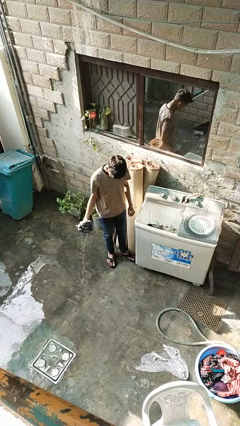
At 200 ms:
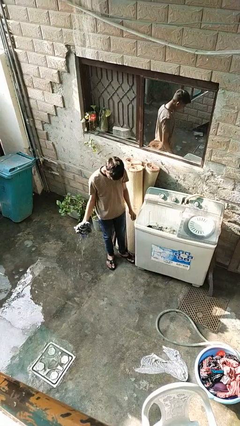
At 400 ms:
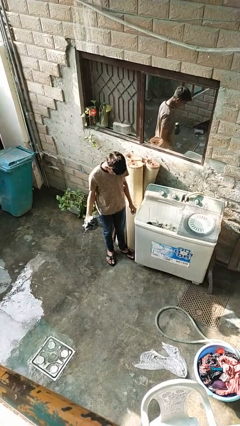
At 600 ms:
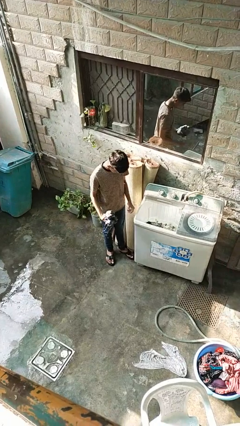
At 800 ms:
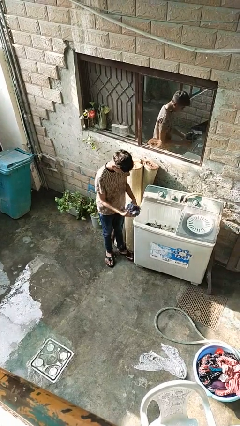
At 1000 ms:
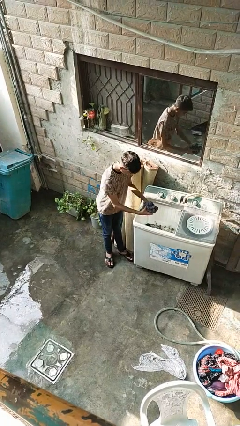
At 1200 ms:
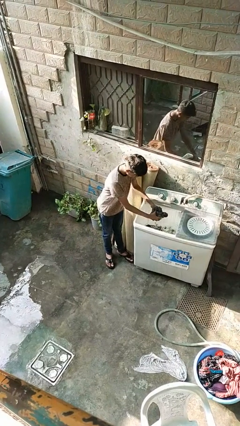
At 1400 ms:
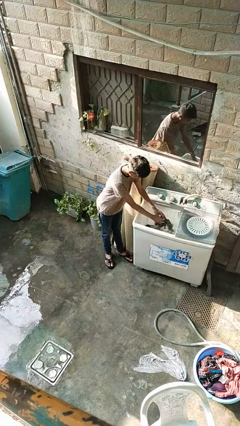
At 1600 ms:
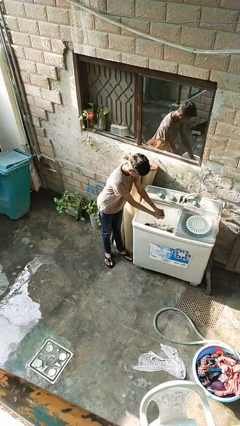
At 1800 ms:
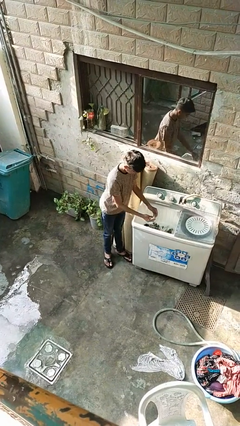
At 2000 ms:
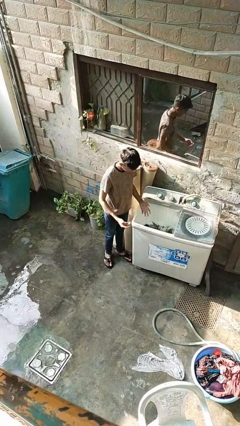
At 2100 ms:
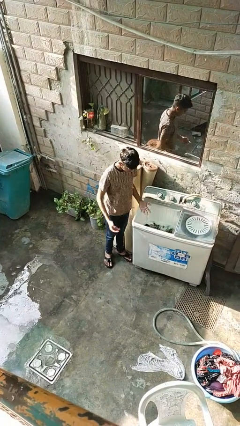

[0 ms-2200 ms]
person loads clotheswasher

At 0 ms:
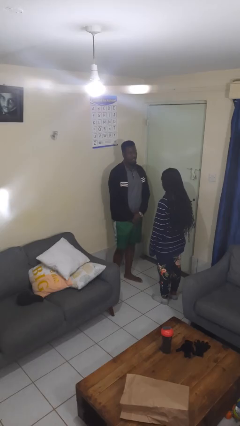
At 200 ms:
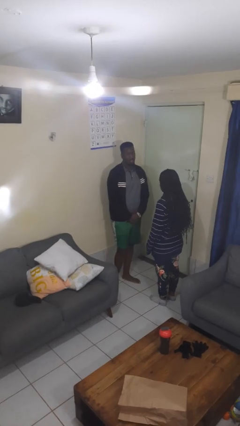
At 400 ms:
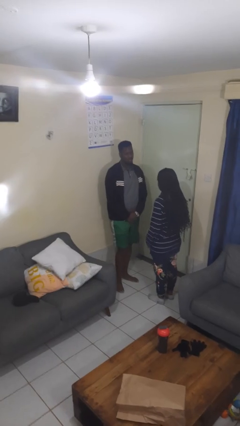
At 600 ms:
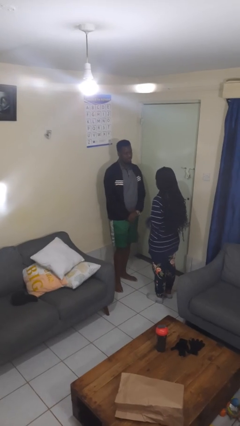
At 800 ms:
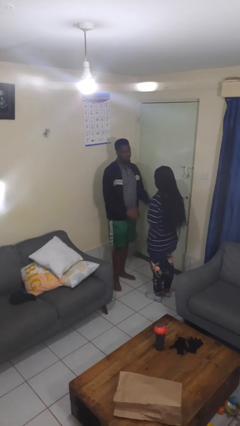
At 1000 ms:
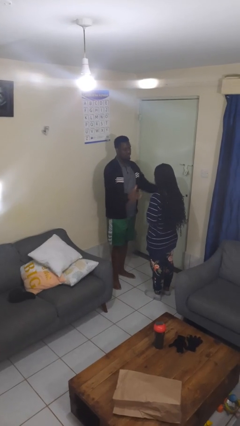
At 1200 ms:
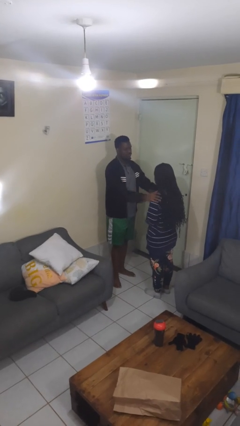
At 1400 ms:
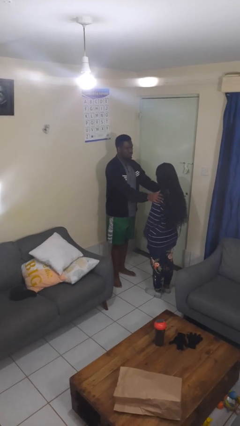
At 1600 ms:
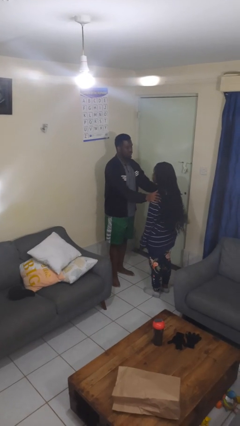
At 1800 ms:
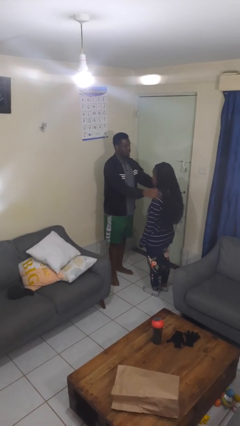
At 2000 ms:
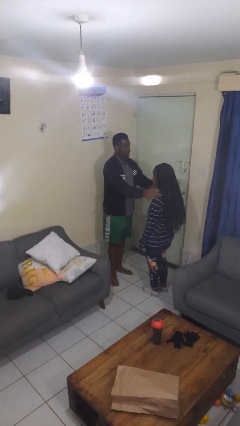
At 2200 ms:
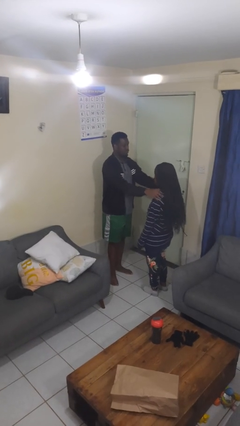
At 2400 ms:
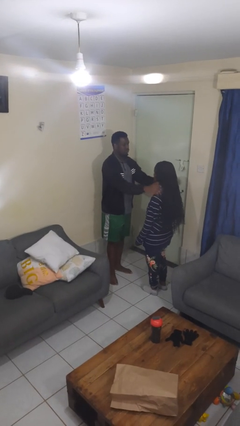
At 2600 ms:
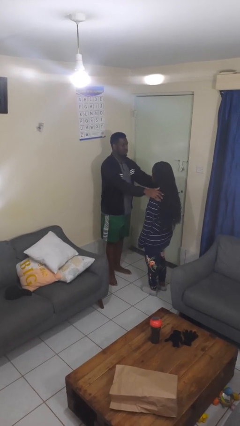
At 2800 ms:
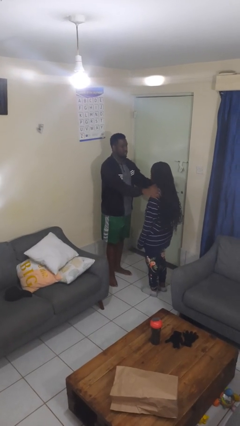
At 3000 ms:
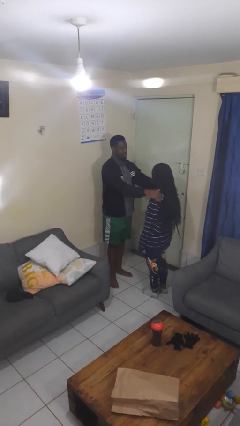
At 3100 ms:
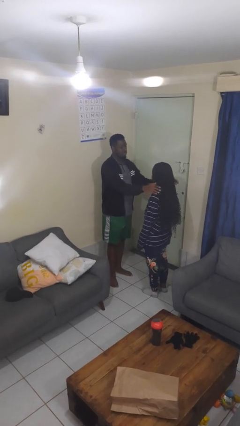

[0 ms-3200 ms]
person pounds shoulders of person

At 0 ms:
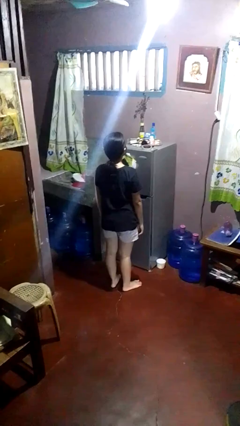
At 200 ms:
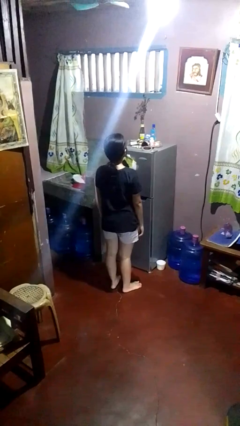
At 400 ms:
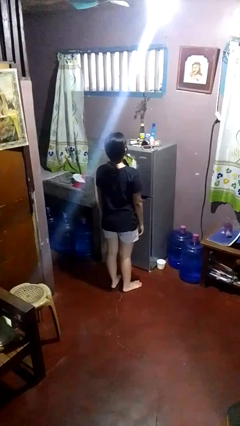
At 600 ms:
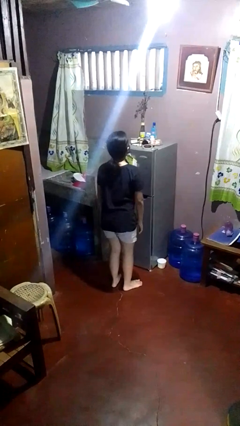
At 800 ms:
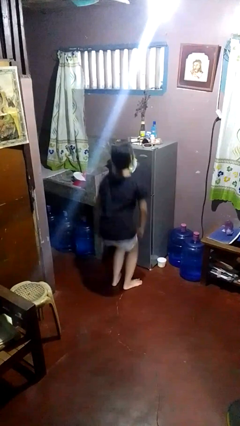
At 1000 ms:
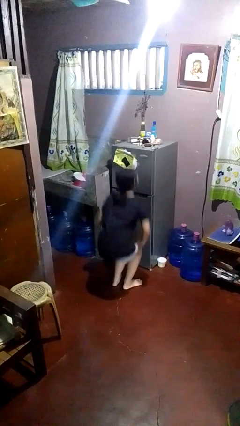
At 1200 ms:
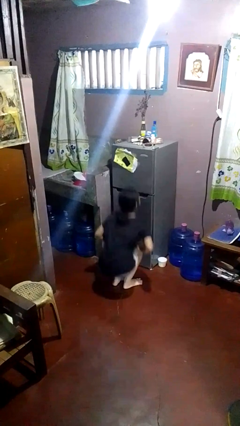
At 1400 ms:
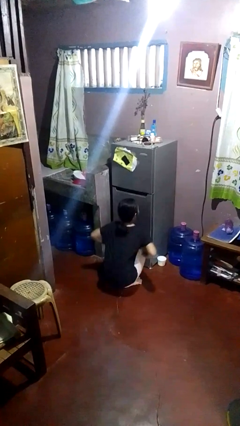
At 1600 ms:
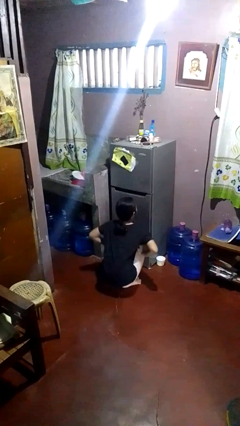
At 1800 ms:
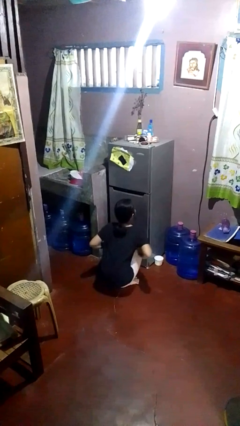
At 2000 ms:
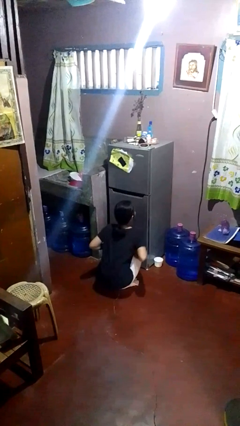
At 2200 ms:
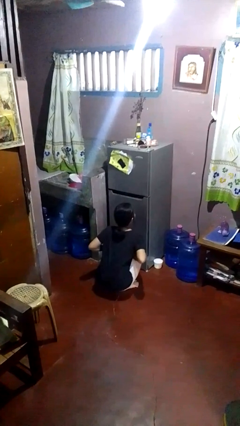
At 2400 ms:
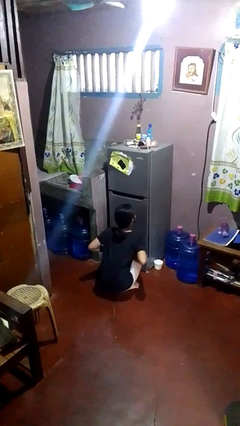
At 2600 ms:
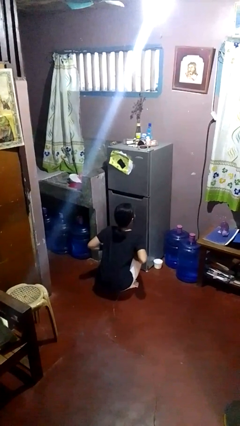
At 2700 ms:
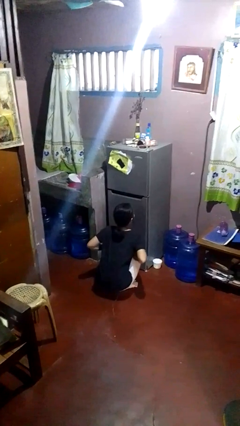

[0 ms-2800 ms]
person squats

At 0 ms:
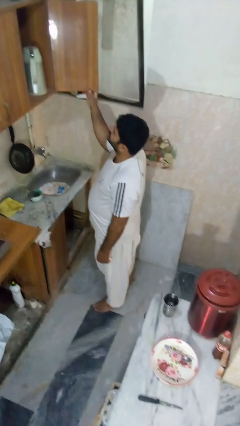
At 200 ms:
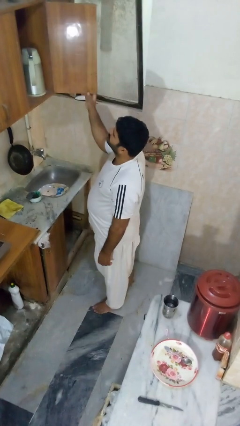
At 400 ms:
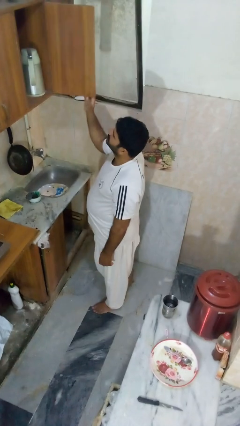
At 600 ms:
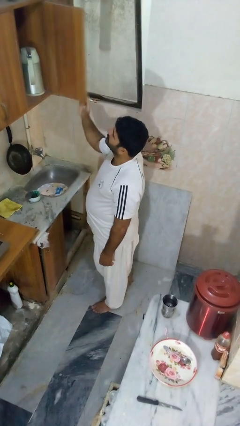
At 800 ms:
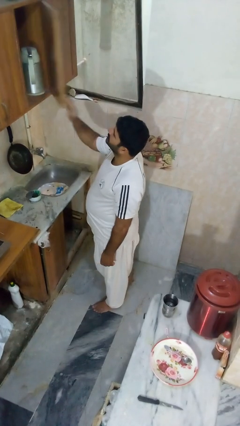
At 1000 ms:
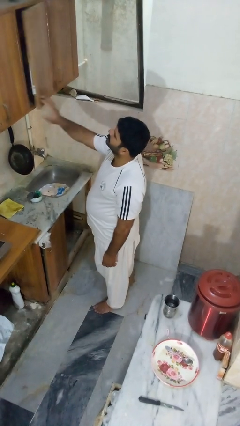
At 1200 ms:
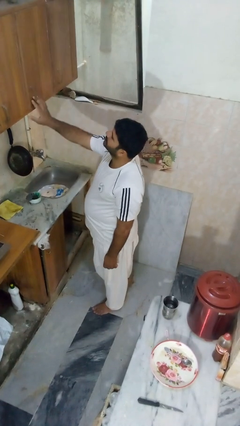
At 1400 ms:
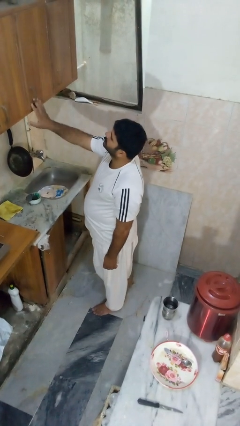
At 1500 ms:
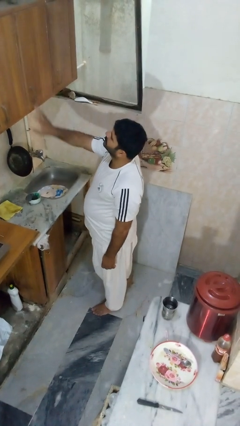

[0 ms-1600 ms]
person closes cabinet

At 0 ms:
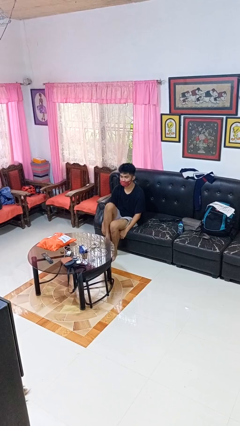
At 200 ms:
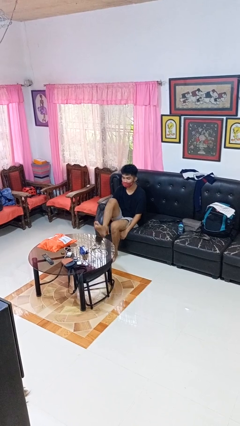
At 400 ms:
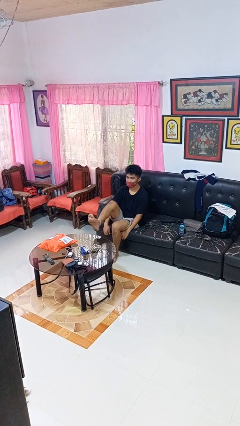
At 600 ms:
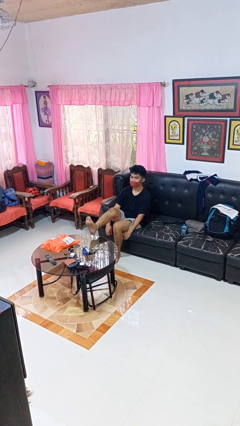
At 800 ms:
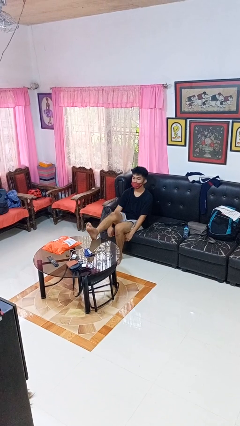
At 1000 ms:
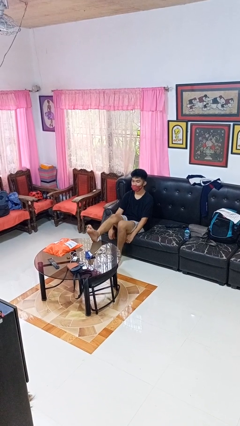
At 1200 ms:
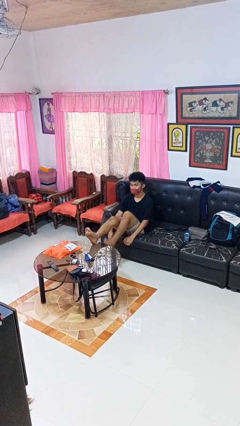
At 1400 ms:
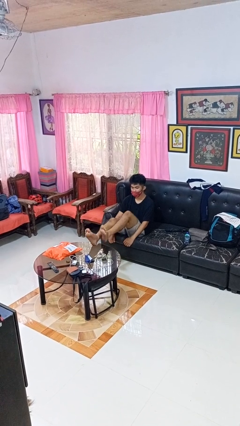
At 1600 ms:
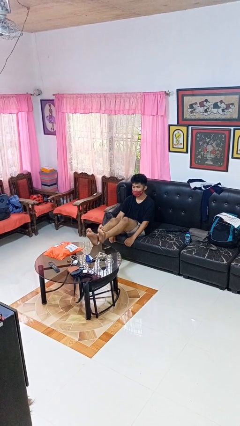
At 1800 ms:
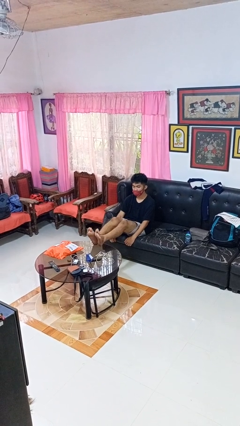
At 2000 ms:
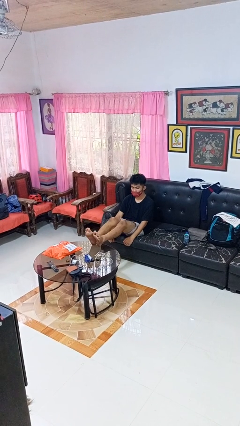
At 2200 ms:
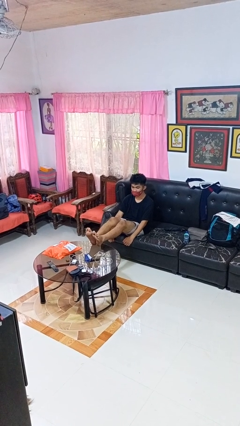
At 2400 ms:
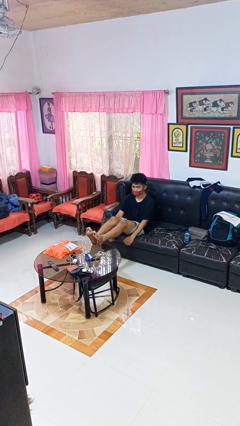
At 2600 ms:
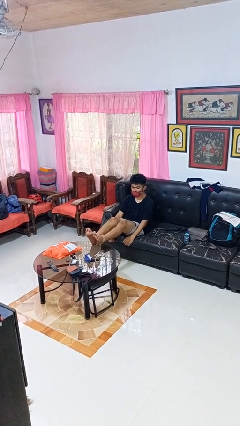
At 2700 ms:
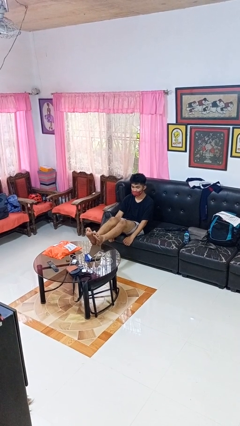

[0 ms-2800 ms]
person puts feet up

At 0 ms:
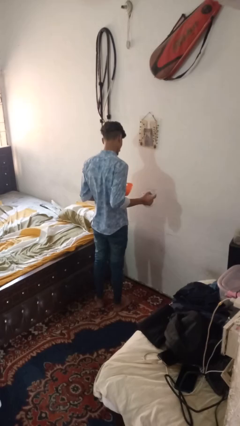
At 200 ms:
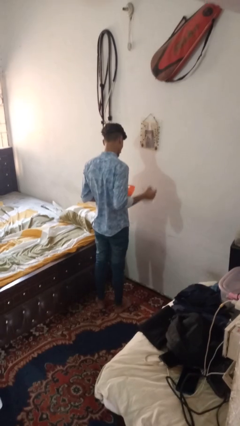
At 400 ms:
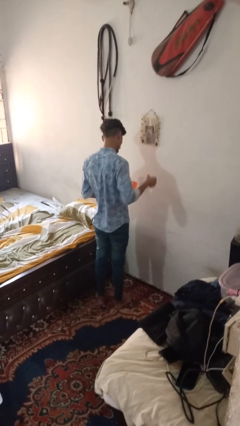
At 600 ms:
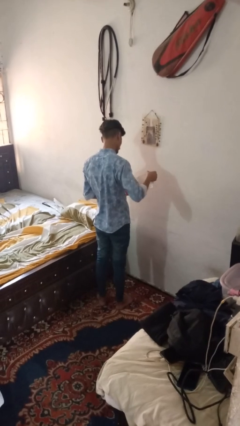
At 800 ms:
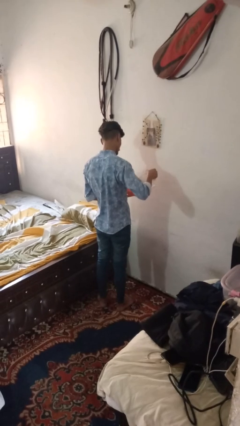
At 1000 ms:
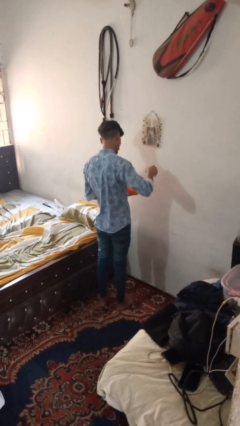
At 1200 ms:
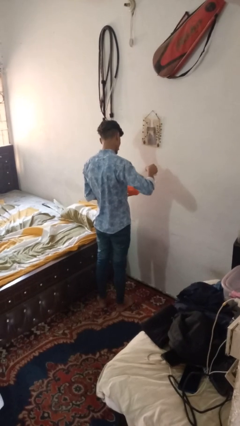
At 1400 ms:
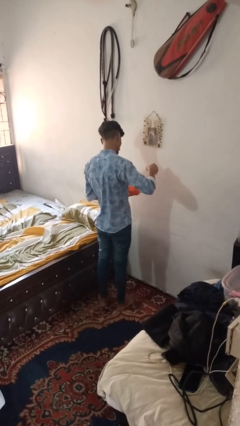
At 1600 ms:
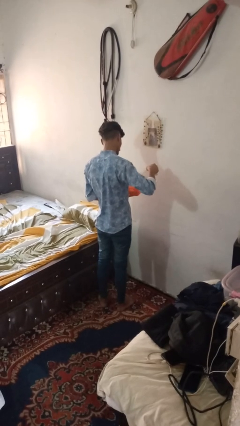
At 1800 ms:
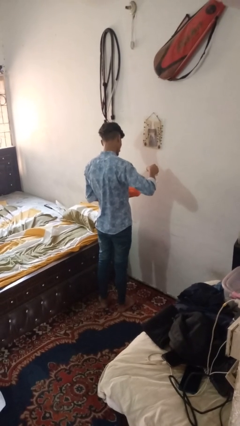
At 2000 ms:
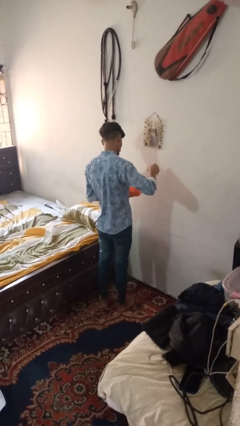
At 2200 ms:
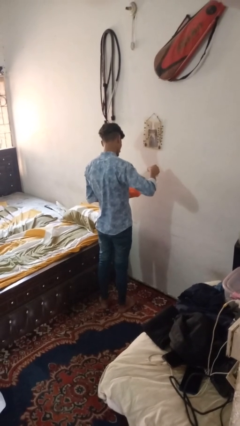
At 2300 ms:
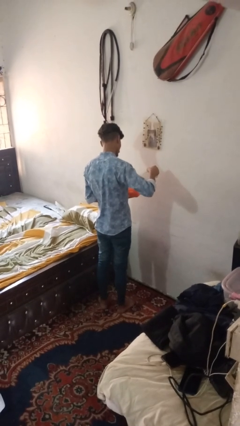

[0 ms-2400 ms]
person pours into bowl

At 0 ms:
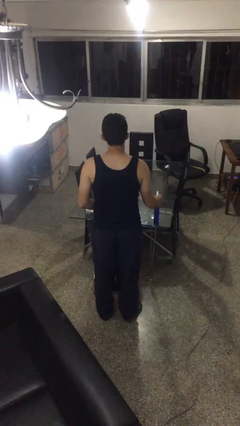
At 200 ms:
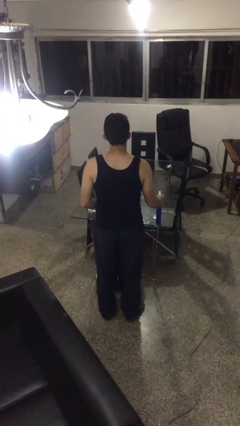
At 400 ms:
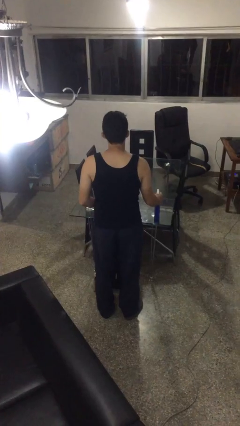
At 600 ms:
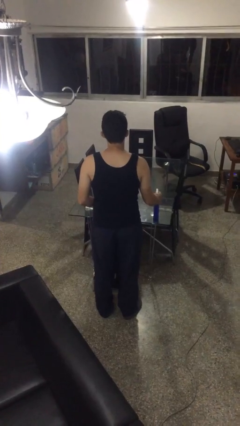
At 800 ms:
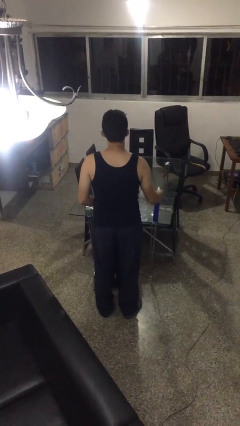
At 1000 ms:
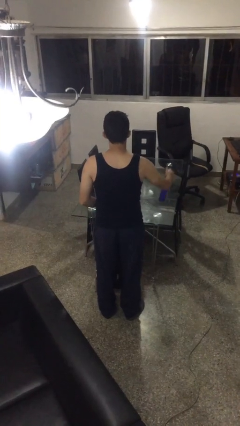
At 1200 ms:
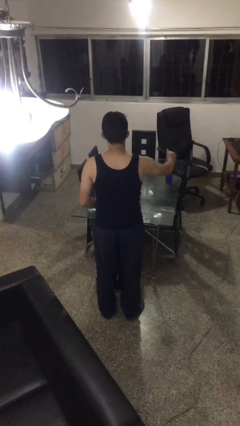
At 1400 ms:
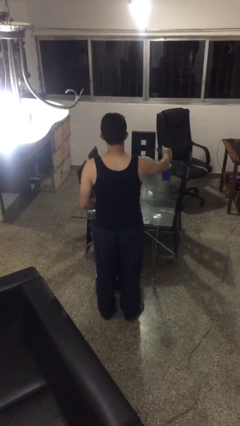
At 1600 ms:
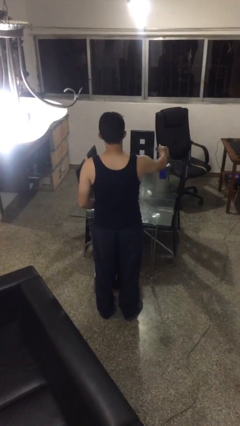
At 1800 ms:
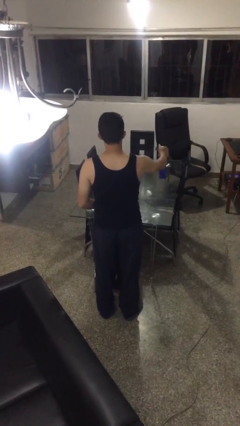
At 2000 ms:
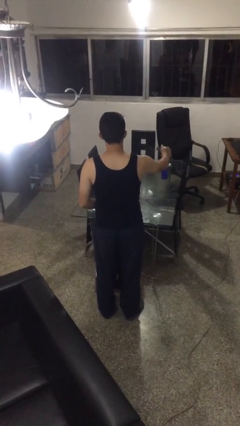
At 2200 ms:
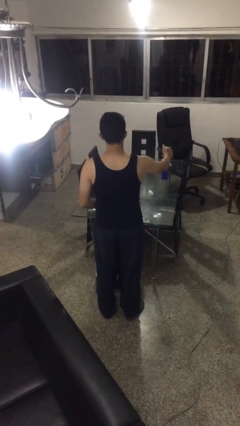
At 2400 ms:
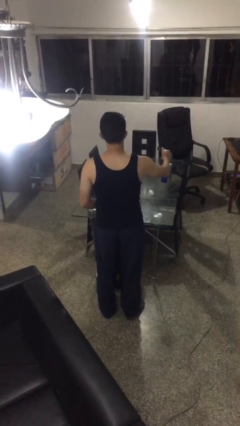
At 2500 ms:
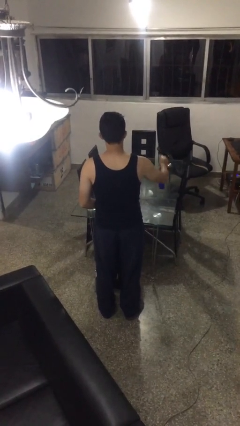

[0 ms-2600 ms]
person sprays from bottle
